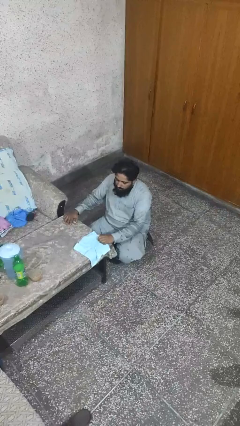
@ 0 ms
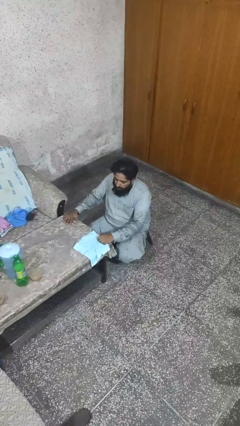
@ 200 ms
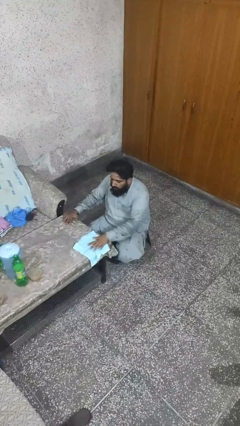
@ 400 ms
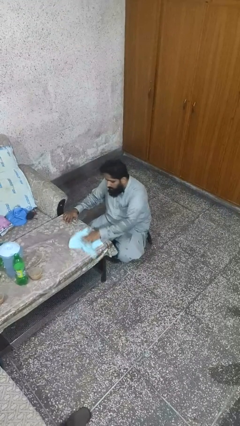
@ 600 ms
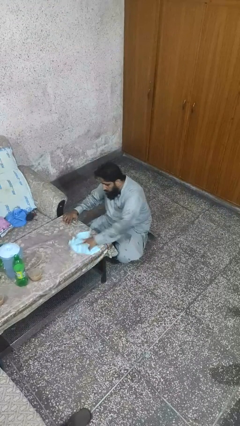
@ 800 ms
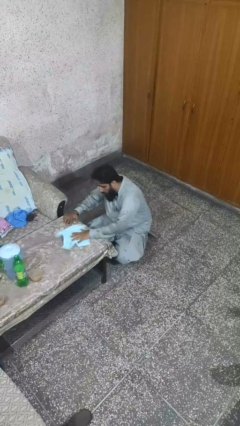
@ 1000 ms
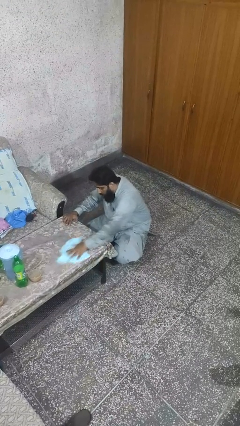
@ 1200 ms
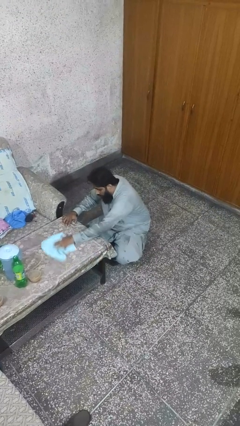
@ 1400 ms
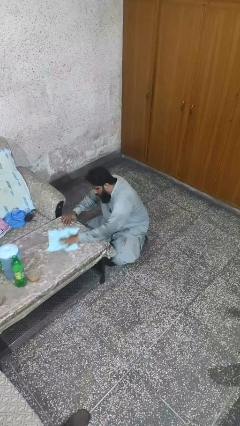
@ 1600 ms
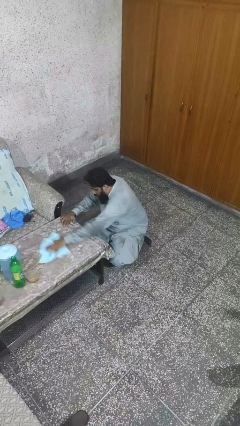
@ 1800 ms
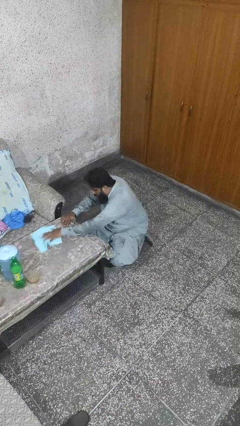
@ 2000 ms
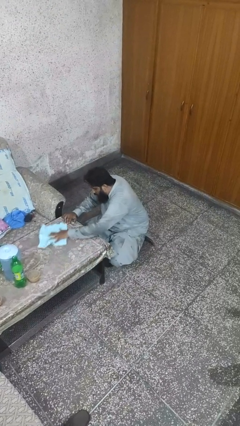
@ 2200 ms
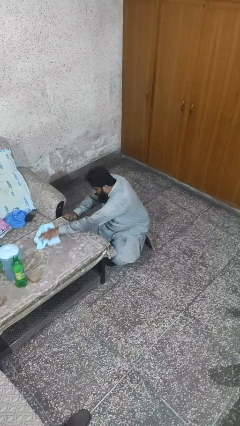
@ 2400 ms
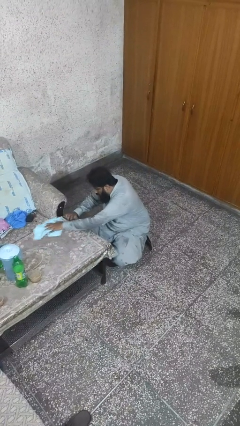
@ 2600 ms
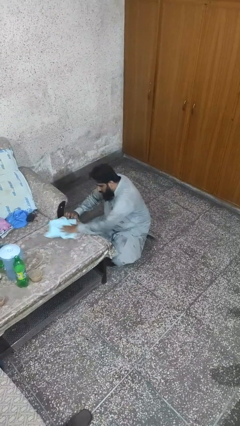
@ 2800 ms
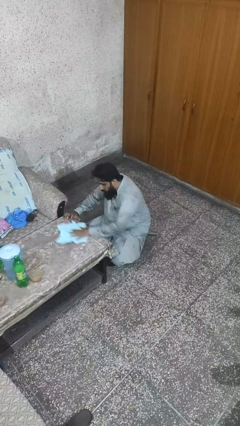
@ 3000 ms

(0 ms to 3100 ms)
person cleans table with rag

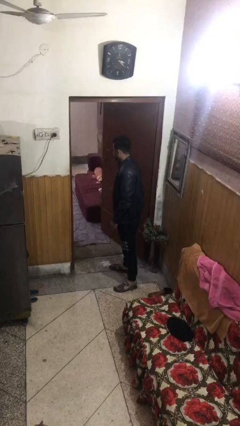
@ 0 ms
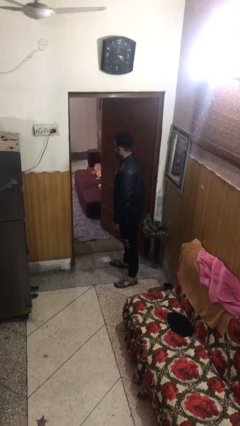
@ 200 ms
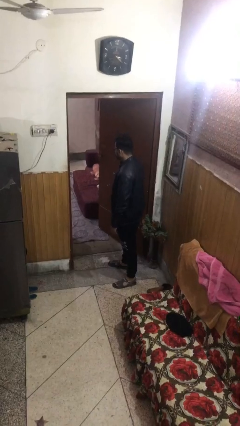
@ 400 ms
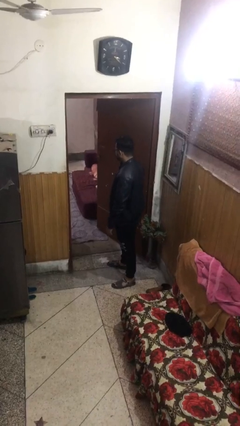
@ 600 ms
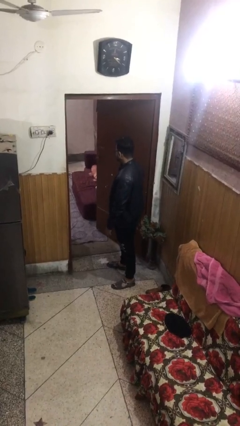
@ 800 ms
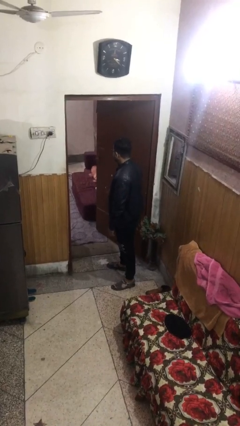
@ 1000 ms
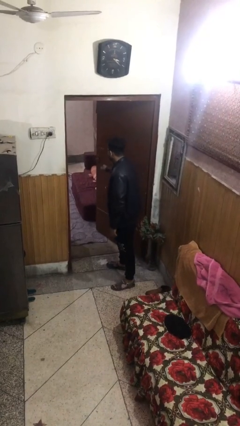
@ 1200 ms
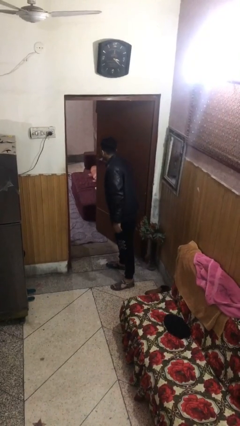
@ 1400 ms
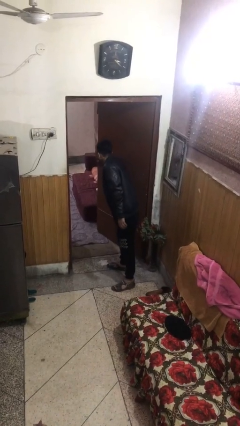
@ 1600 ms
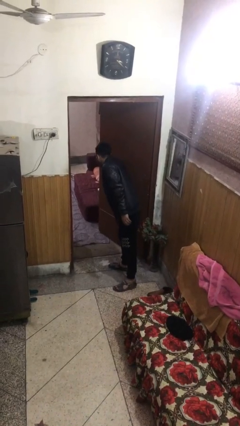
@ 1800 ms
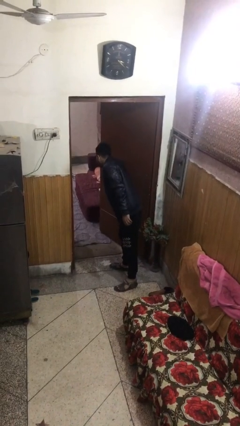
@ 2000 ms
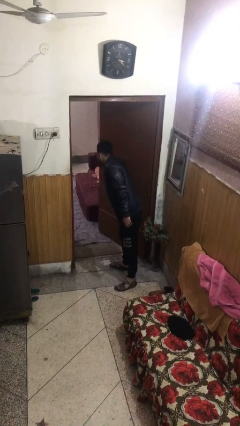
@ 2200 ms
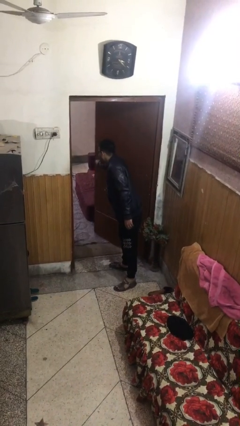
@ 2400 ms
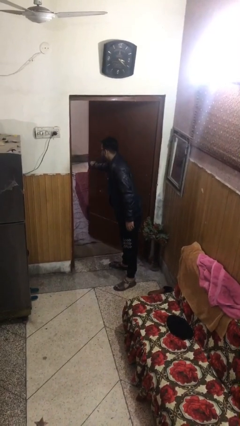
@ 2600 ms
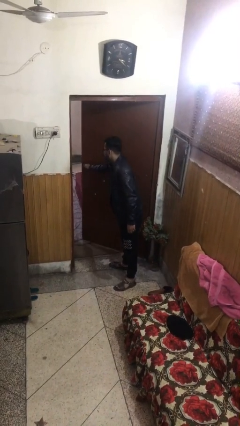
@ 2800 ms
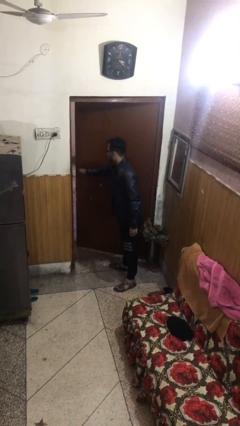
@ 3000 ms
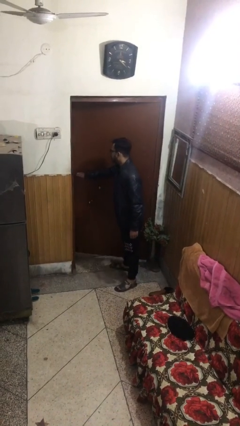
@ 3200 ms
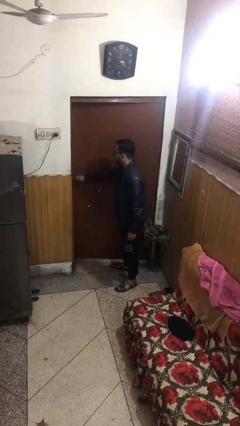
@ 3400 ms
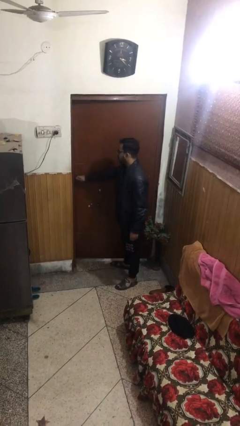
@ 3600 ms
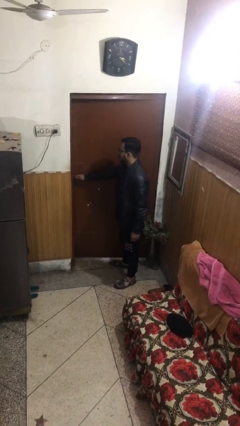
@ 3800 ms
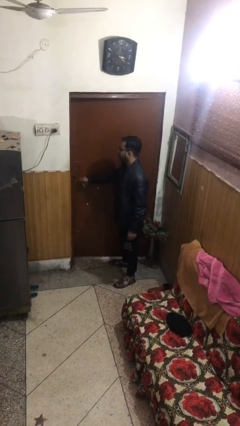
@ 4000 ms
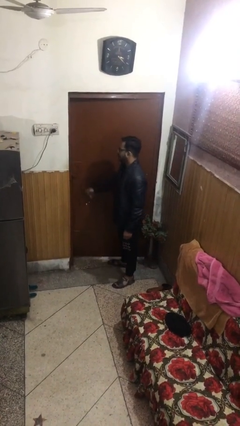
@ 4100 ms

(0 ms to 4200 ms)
person closes facility door

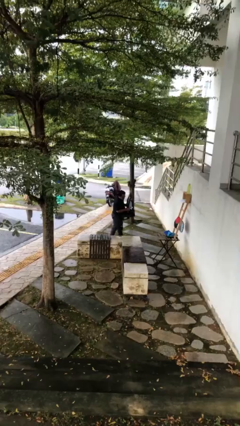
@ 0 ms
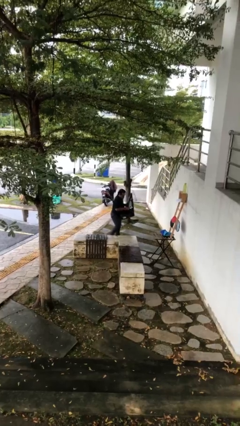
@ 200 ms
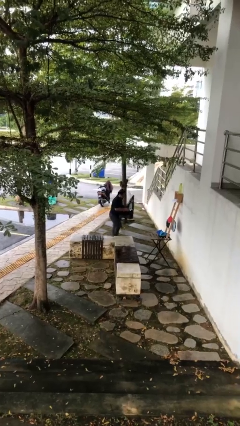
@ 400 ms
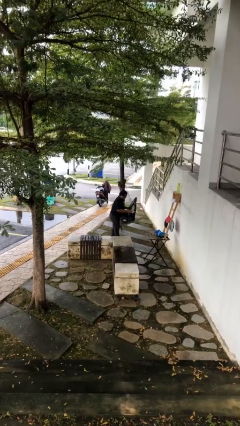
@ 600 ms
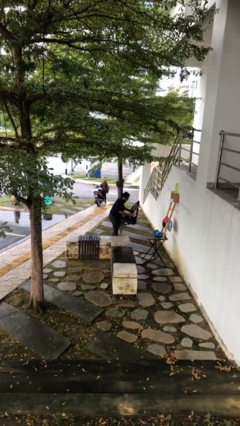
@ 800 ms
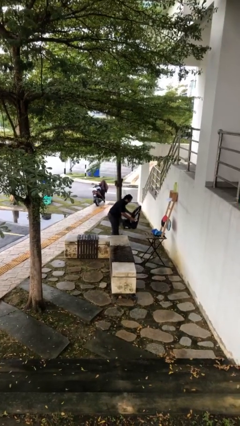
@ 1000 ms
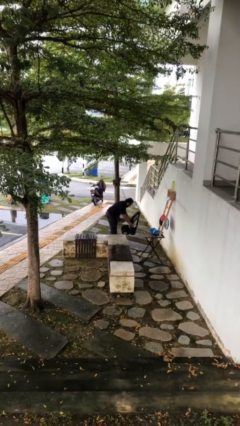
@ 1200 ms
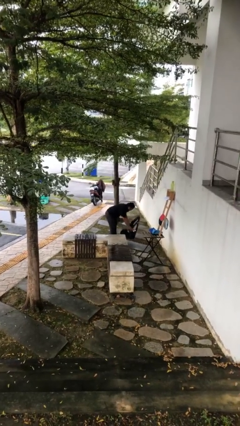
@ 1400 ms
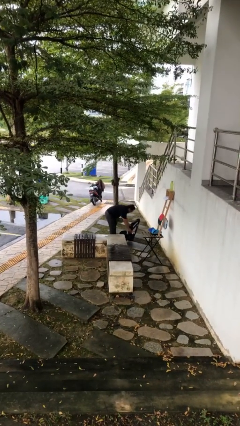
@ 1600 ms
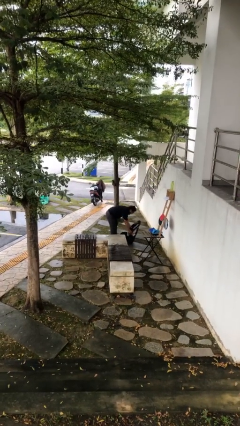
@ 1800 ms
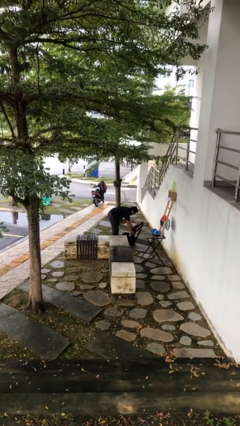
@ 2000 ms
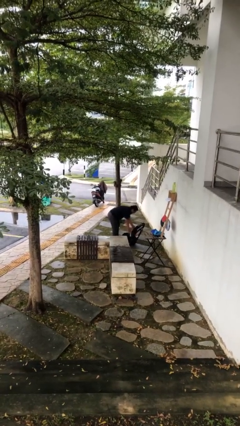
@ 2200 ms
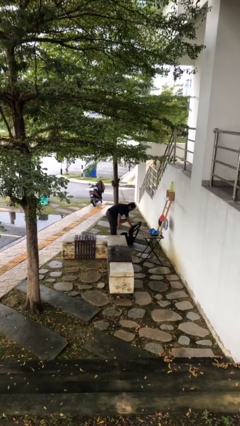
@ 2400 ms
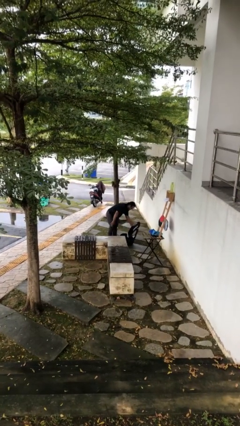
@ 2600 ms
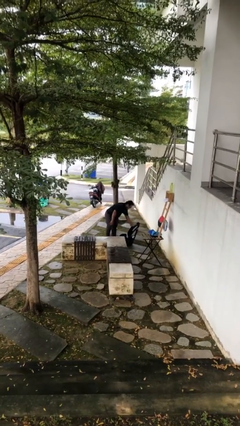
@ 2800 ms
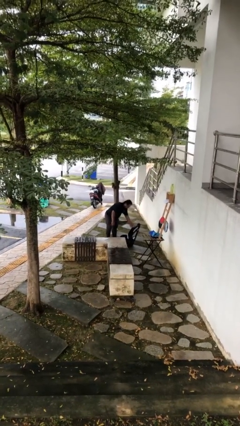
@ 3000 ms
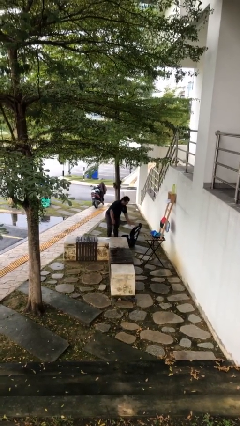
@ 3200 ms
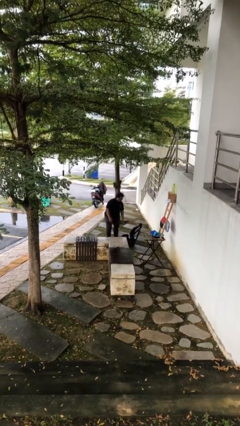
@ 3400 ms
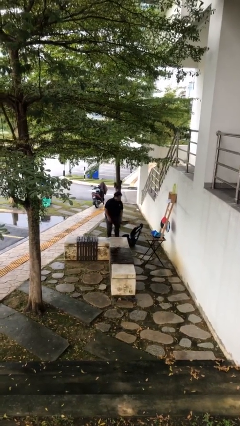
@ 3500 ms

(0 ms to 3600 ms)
person puts down object on floor

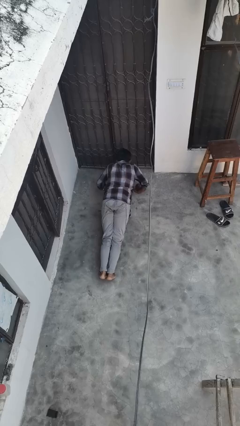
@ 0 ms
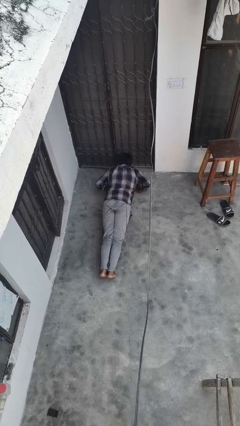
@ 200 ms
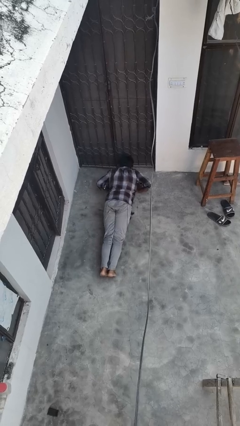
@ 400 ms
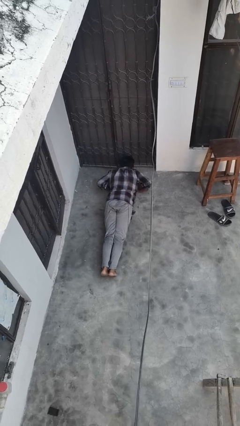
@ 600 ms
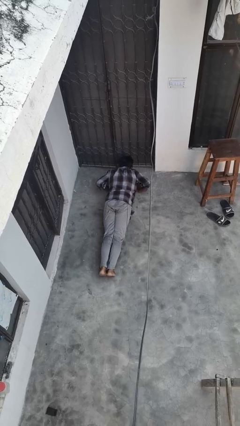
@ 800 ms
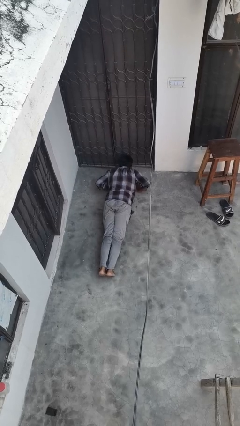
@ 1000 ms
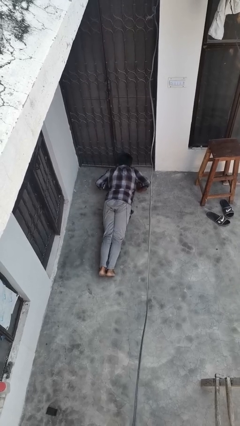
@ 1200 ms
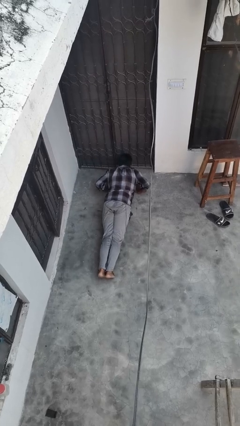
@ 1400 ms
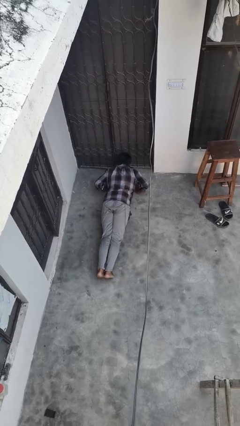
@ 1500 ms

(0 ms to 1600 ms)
person exercises with pushup

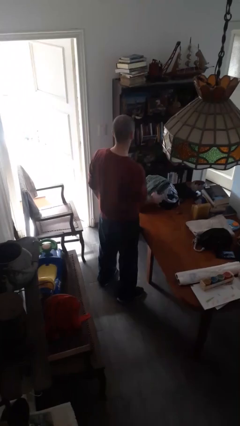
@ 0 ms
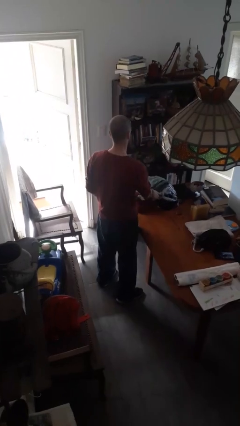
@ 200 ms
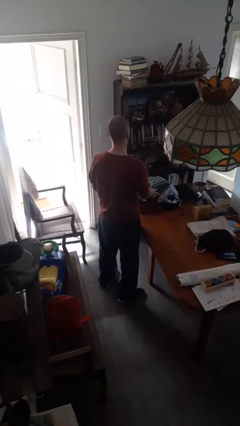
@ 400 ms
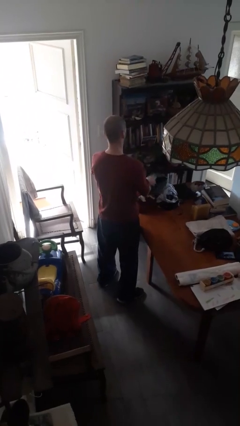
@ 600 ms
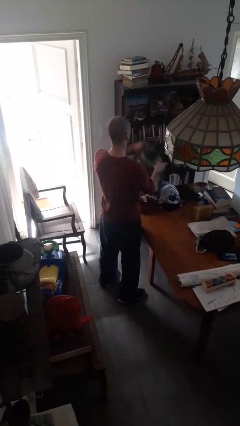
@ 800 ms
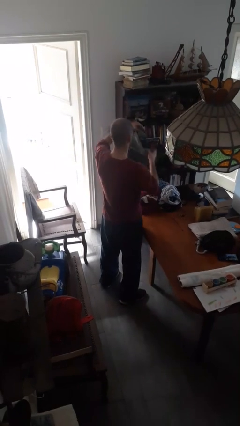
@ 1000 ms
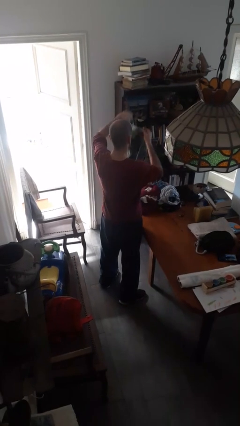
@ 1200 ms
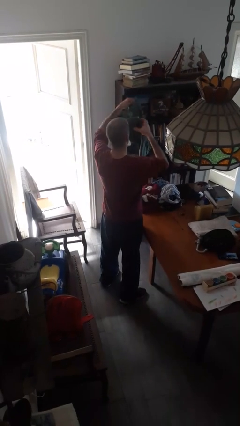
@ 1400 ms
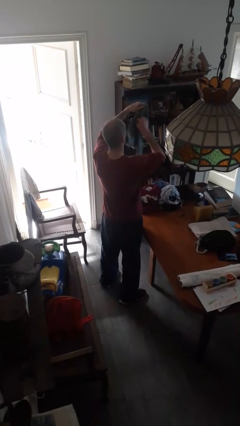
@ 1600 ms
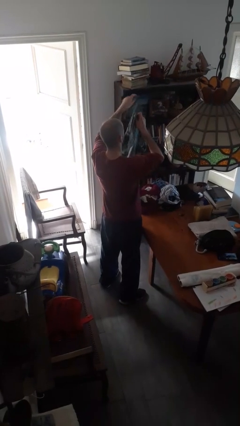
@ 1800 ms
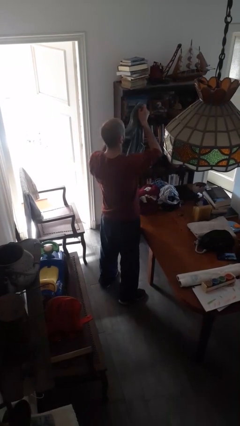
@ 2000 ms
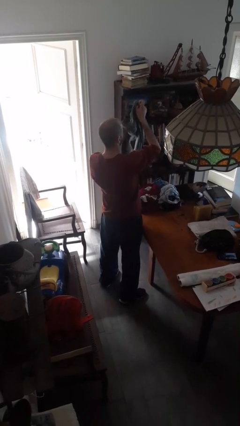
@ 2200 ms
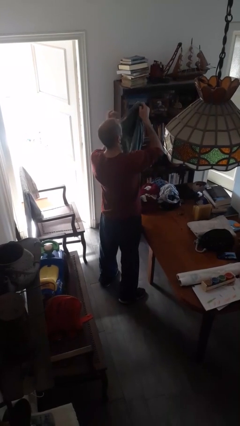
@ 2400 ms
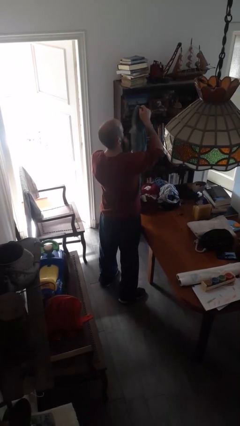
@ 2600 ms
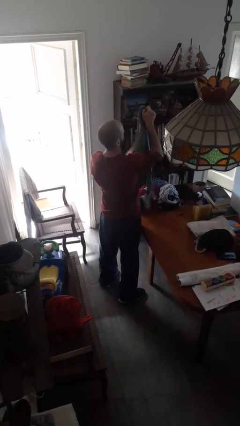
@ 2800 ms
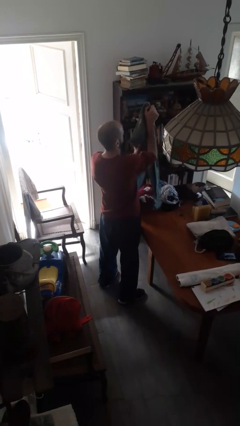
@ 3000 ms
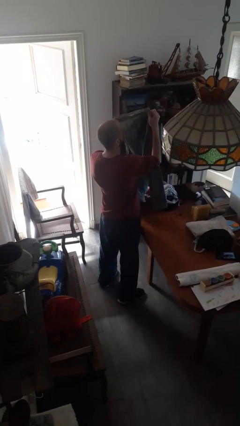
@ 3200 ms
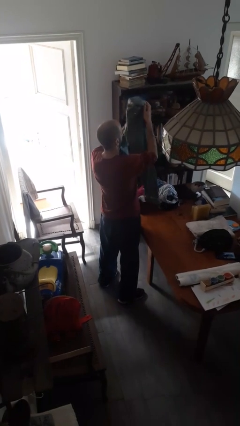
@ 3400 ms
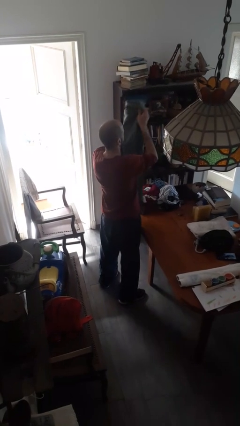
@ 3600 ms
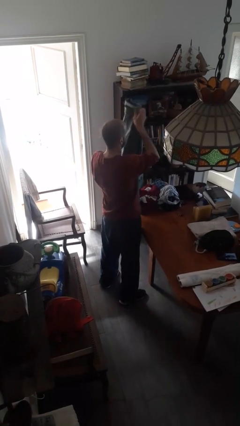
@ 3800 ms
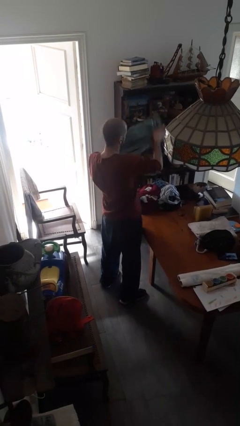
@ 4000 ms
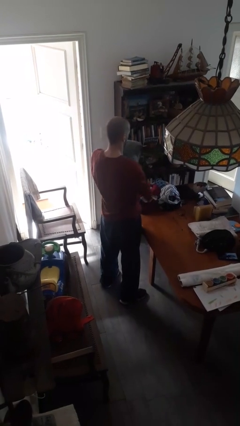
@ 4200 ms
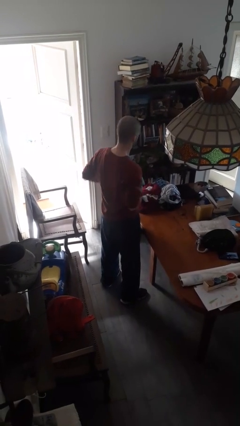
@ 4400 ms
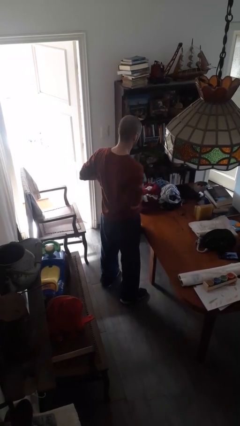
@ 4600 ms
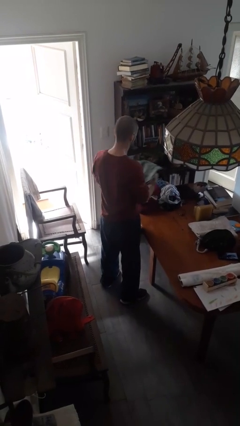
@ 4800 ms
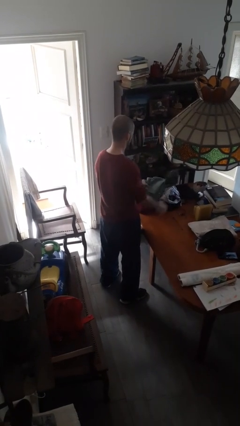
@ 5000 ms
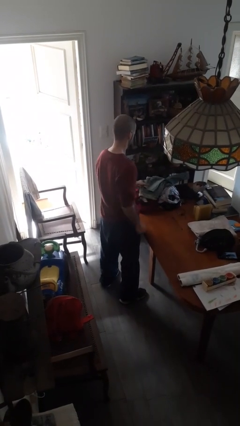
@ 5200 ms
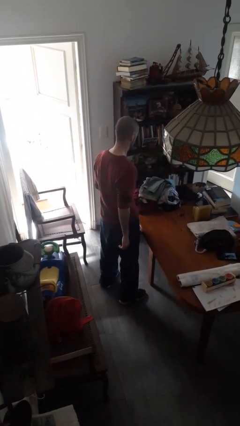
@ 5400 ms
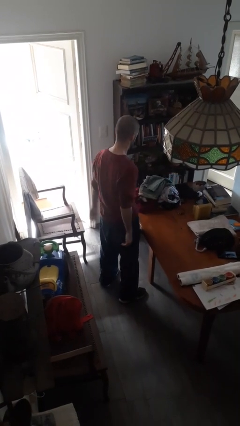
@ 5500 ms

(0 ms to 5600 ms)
person folds pants
